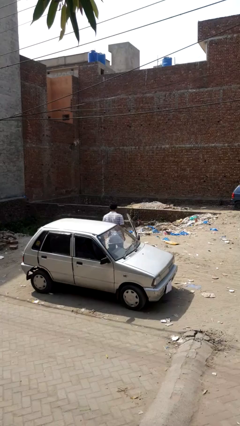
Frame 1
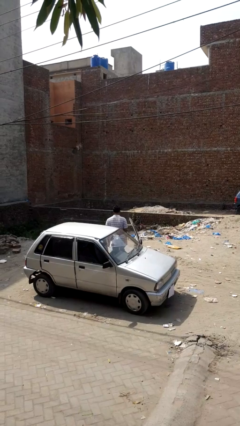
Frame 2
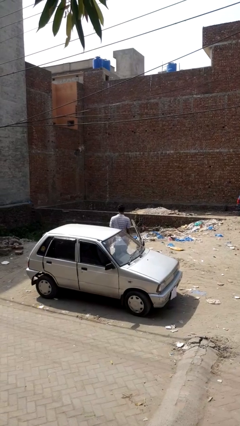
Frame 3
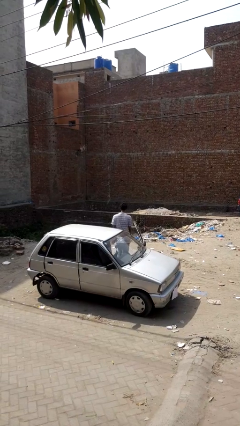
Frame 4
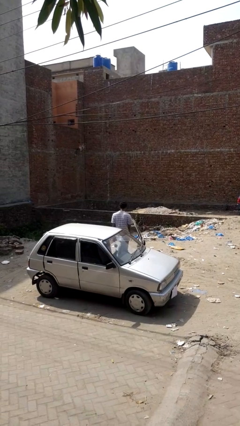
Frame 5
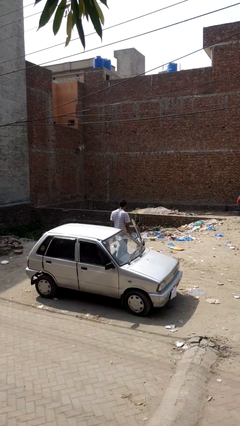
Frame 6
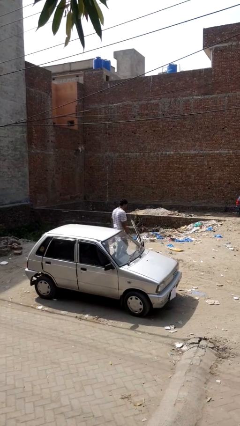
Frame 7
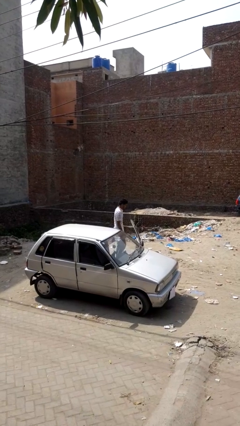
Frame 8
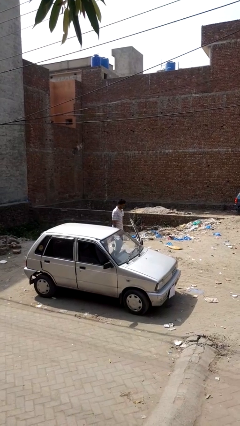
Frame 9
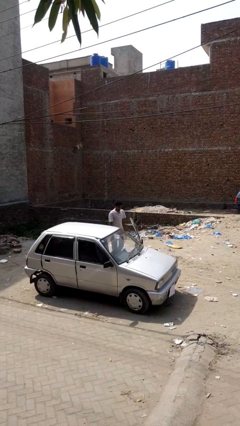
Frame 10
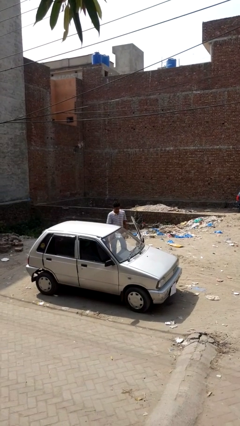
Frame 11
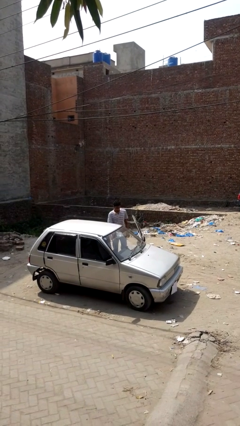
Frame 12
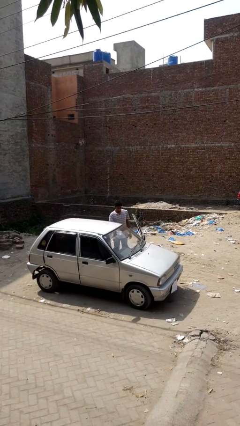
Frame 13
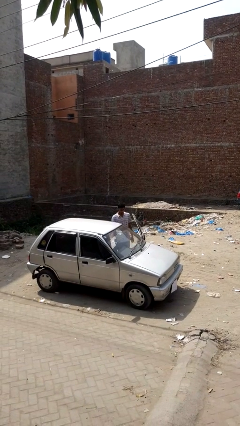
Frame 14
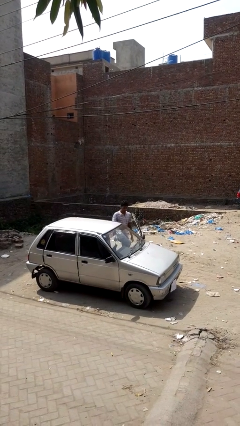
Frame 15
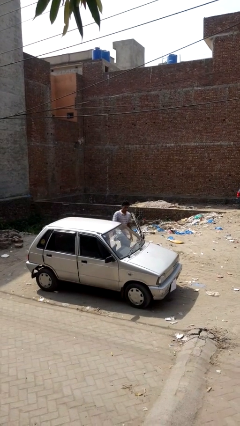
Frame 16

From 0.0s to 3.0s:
person exits car

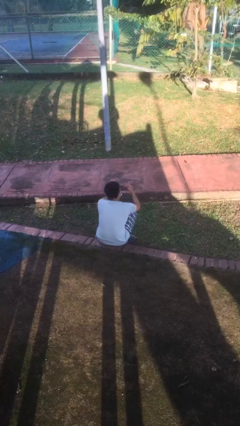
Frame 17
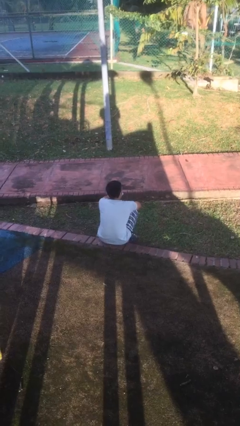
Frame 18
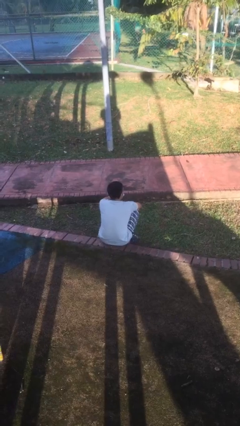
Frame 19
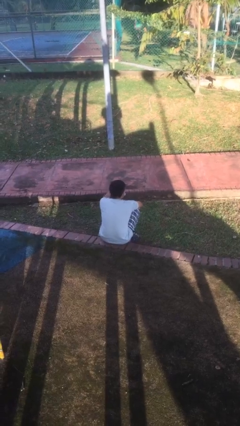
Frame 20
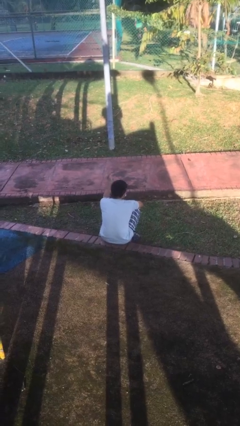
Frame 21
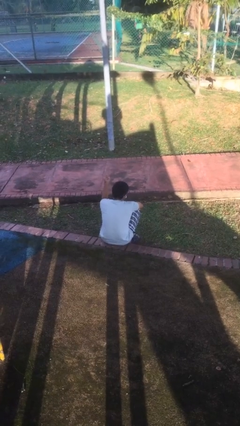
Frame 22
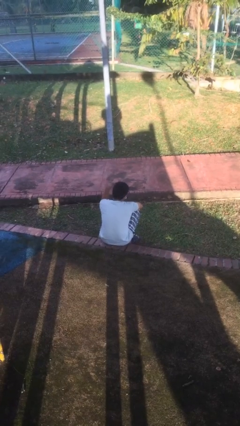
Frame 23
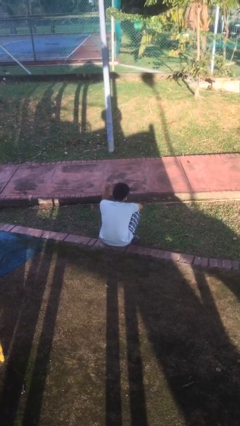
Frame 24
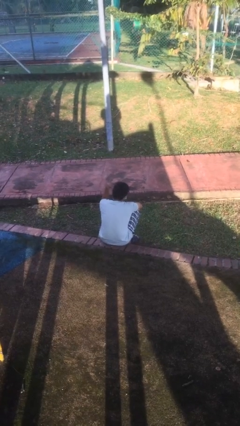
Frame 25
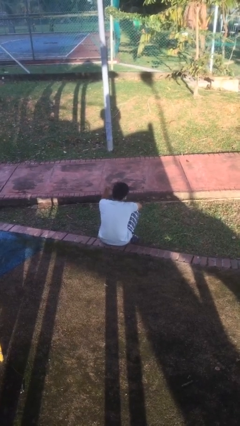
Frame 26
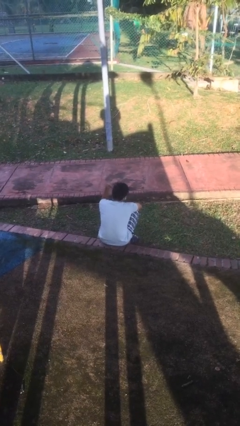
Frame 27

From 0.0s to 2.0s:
person gestures listen closely

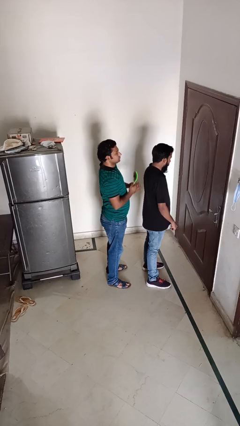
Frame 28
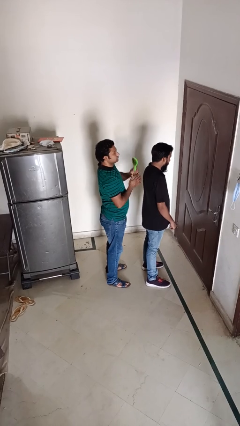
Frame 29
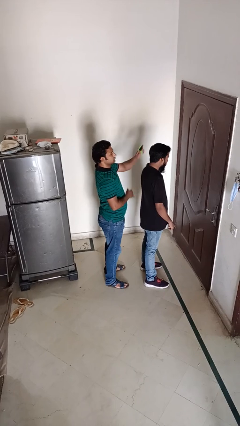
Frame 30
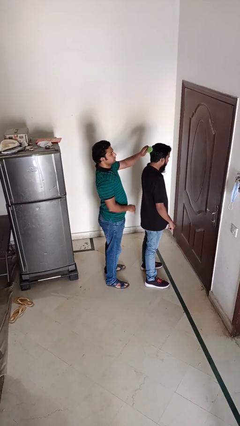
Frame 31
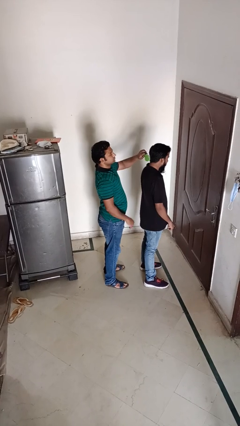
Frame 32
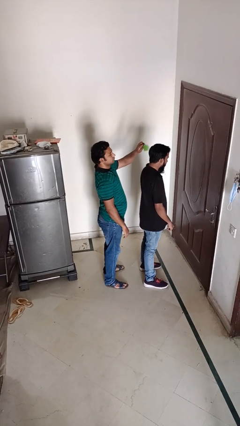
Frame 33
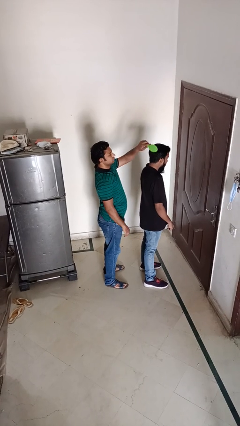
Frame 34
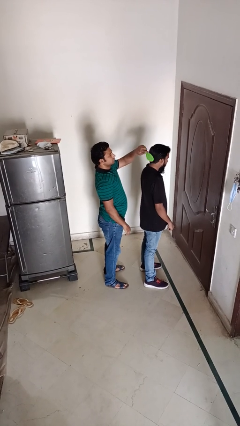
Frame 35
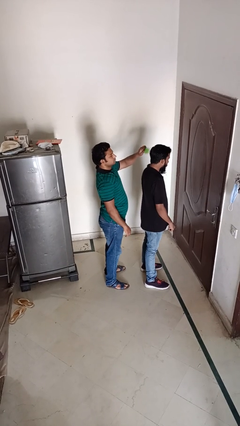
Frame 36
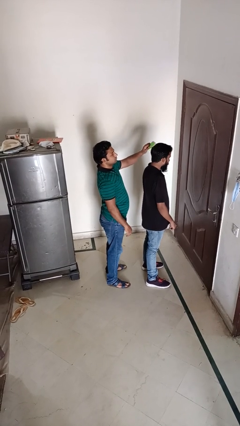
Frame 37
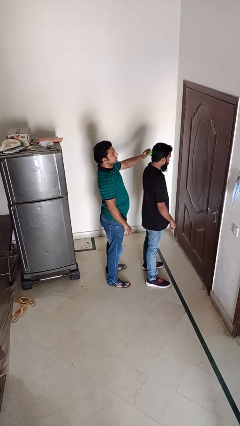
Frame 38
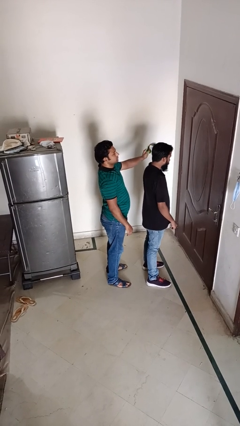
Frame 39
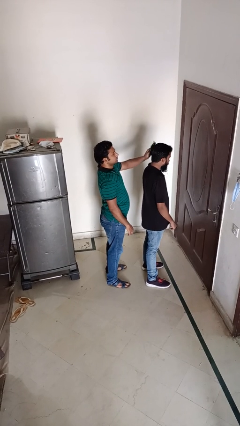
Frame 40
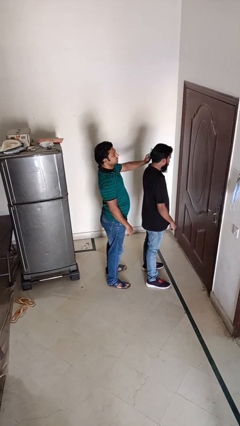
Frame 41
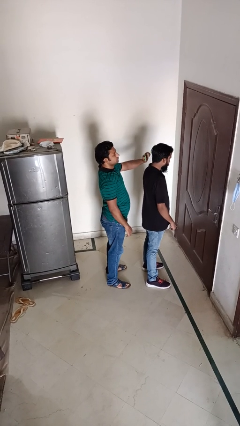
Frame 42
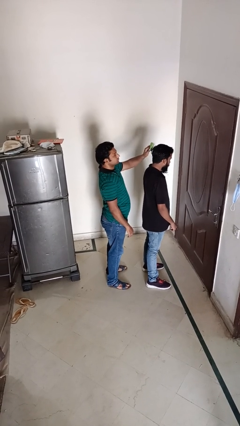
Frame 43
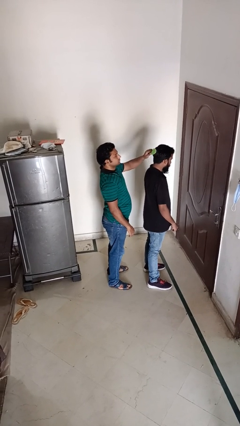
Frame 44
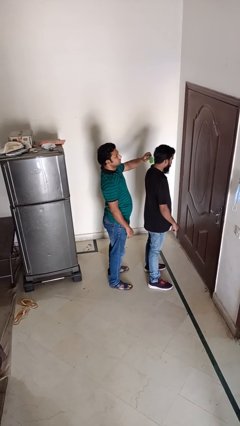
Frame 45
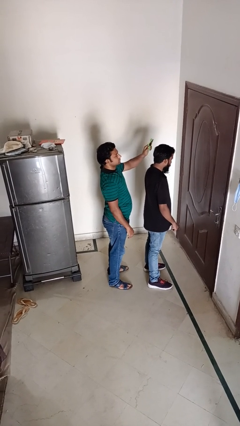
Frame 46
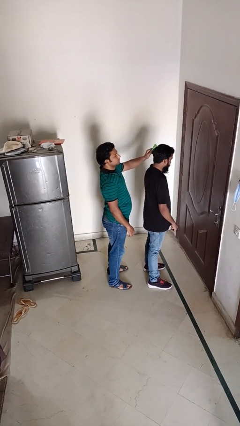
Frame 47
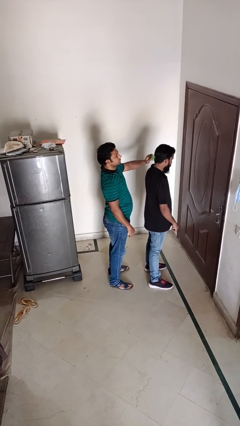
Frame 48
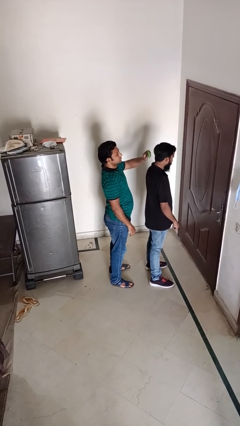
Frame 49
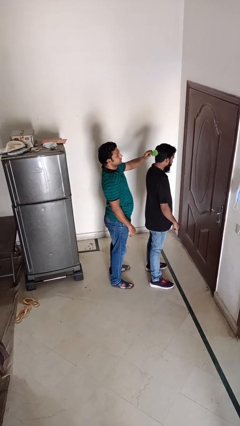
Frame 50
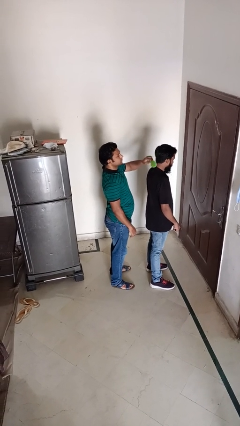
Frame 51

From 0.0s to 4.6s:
person brushes hair of person

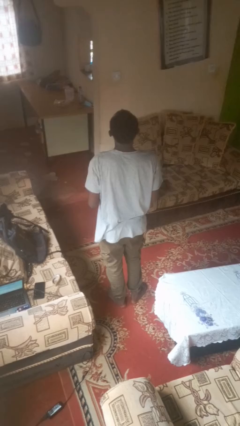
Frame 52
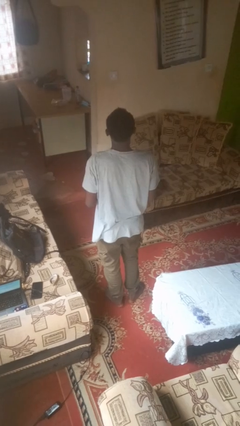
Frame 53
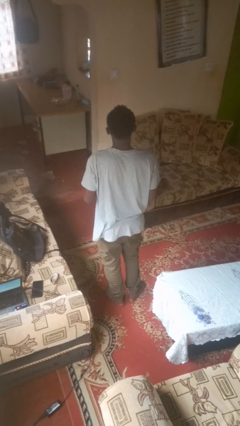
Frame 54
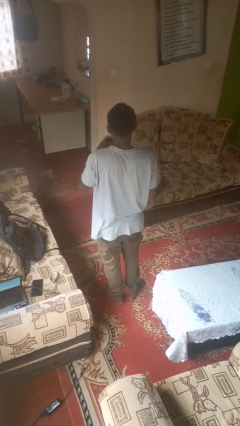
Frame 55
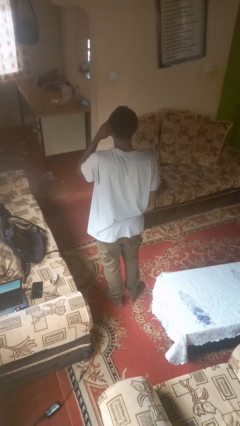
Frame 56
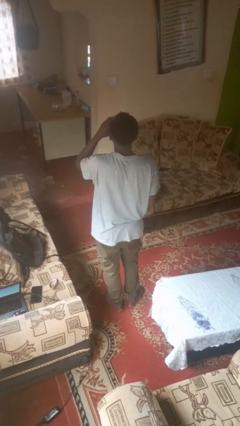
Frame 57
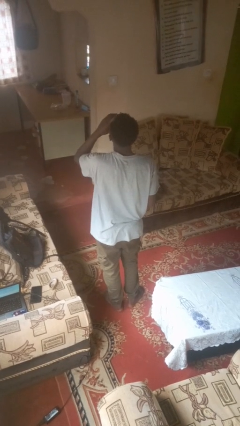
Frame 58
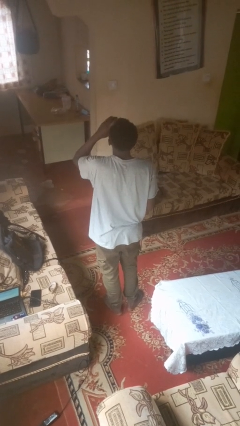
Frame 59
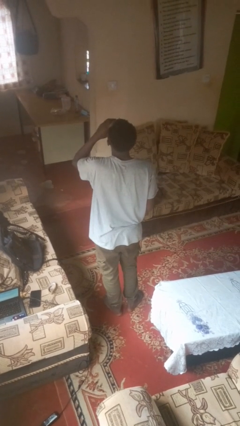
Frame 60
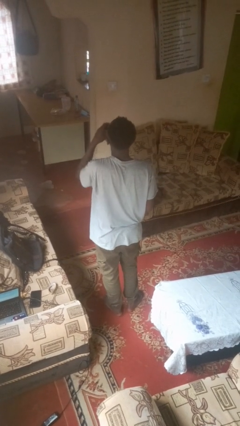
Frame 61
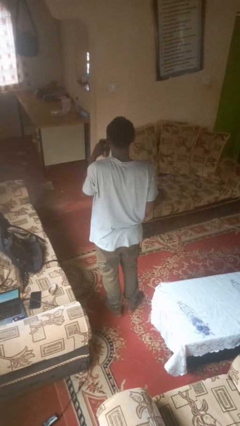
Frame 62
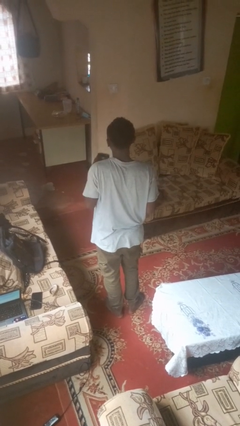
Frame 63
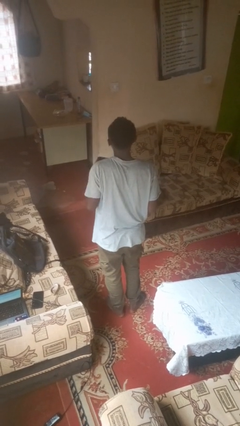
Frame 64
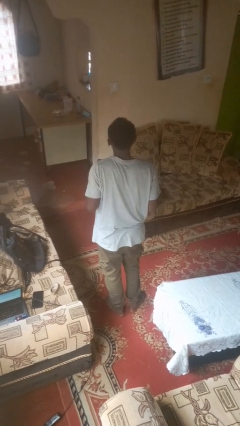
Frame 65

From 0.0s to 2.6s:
person drinks from cup

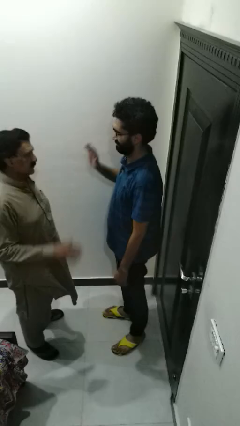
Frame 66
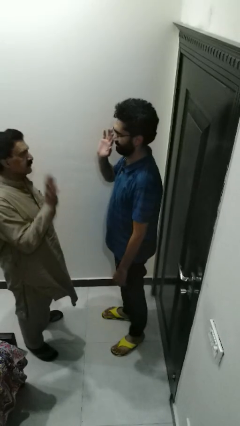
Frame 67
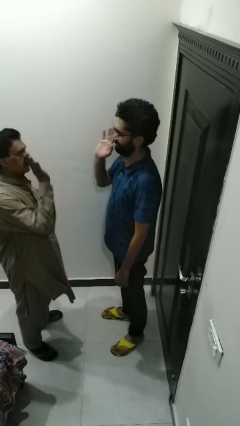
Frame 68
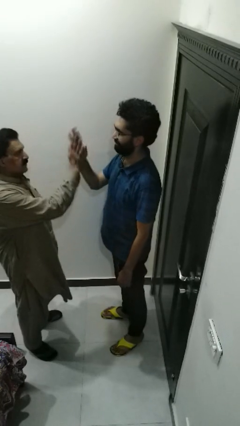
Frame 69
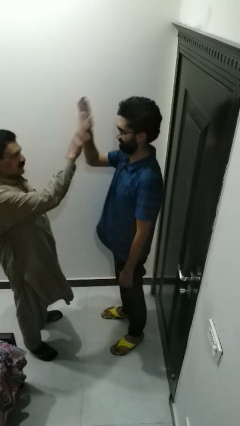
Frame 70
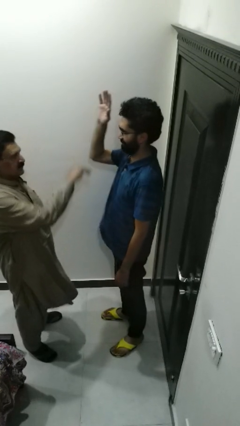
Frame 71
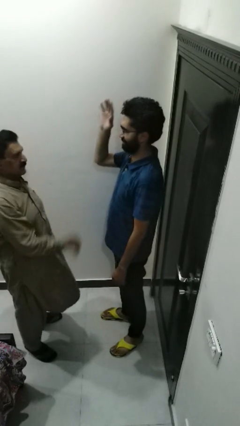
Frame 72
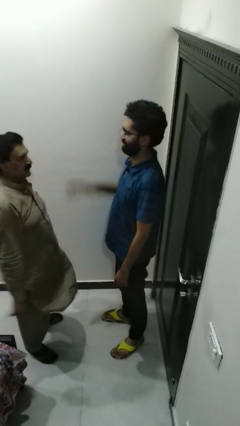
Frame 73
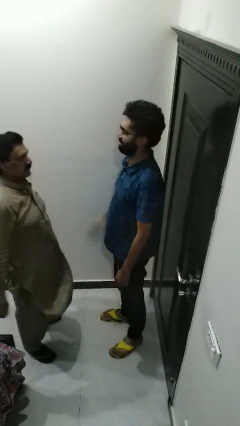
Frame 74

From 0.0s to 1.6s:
person highfives hand

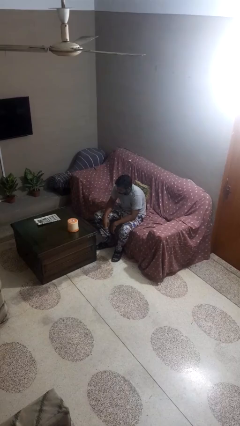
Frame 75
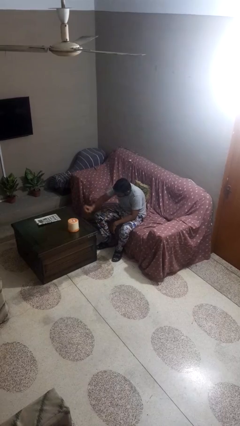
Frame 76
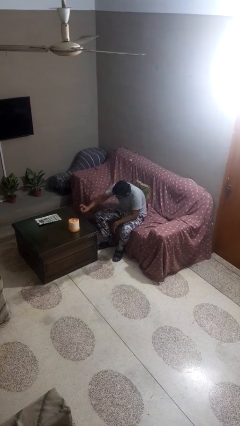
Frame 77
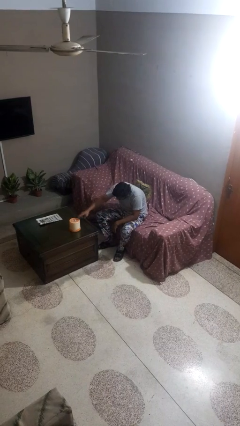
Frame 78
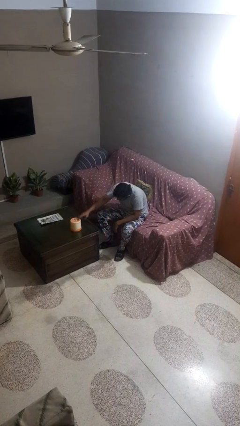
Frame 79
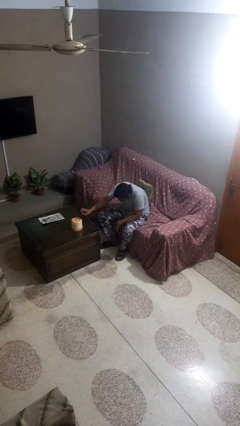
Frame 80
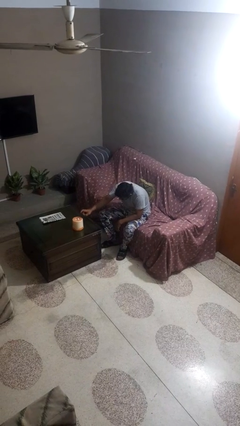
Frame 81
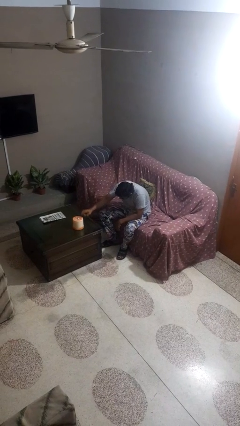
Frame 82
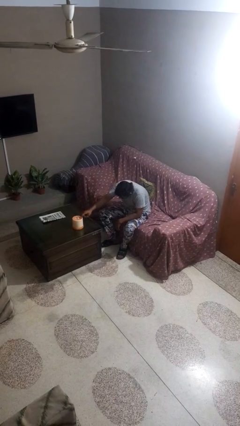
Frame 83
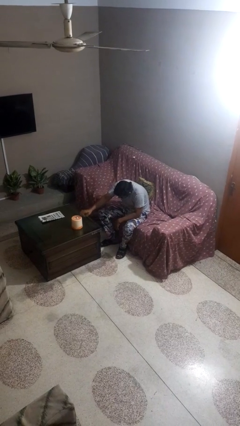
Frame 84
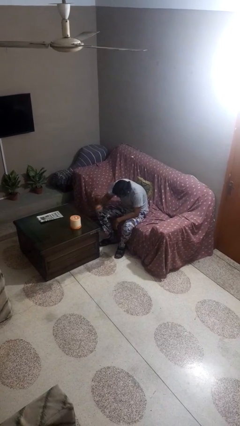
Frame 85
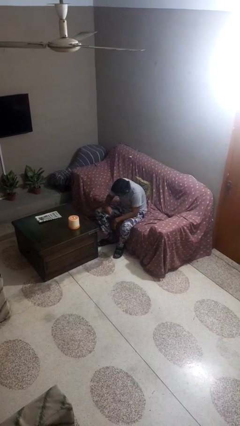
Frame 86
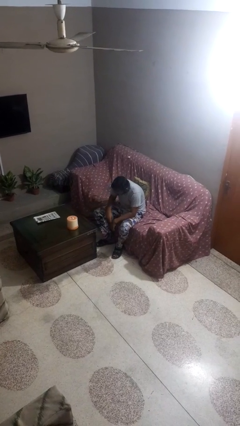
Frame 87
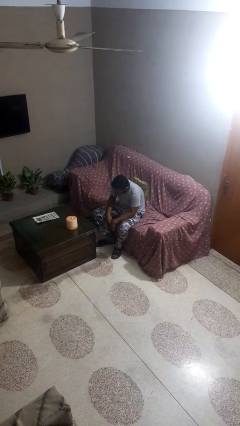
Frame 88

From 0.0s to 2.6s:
person taps object with finger

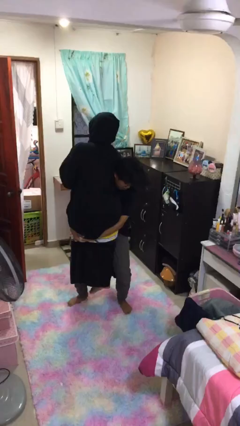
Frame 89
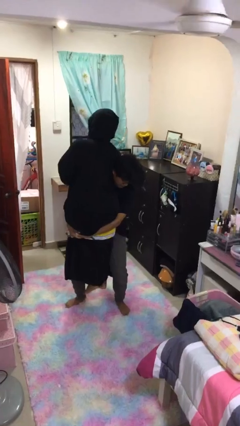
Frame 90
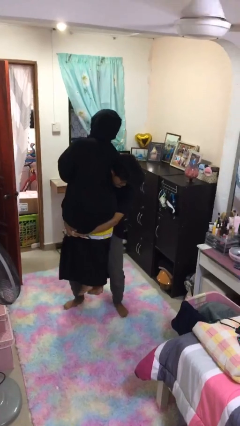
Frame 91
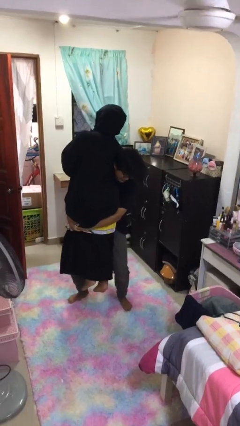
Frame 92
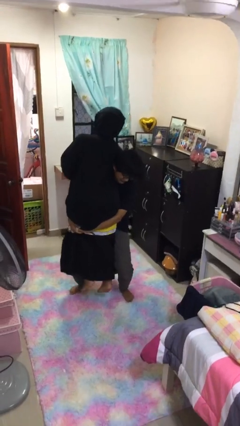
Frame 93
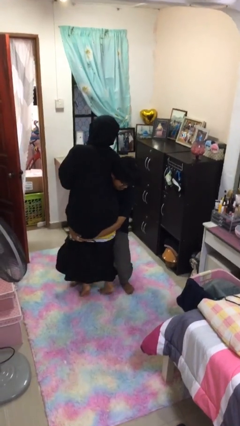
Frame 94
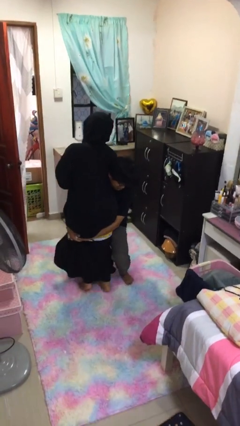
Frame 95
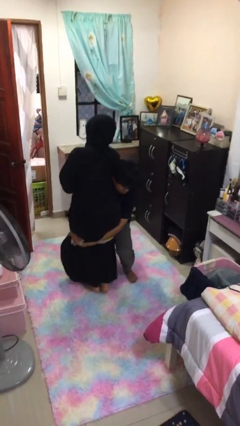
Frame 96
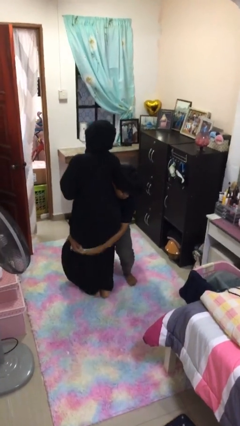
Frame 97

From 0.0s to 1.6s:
person puts down person
